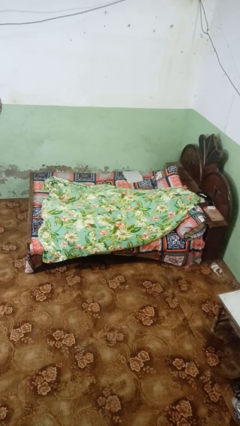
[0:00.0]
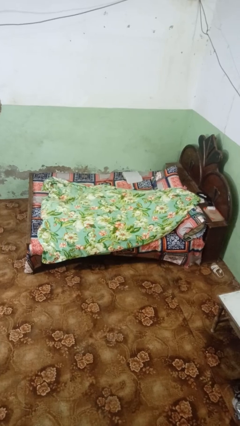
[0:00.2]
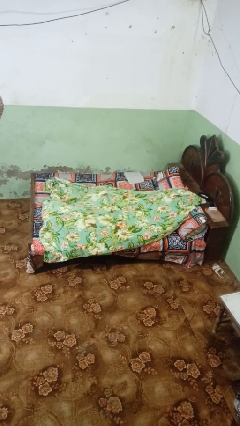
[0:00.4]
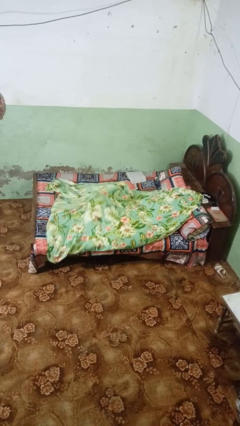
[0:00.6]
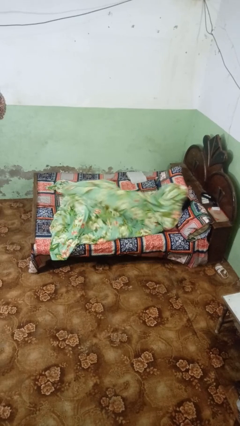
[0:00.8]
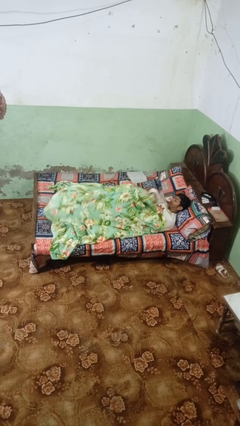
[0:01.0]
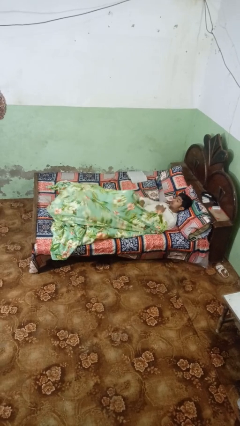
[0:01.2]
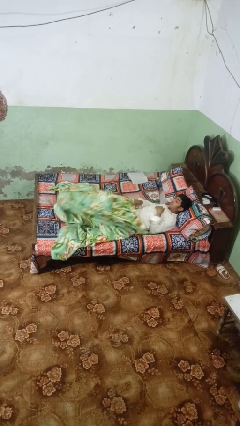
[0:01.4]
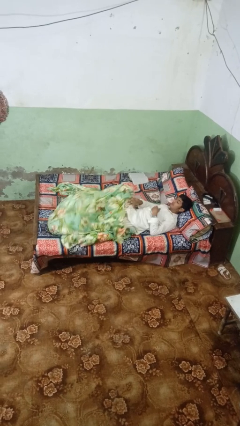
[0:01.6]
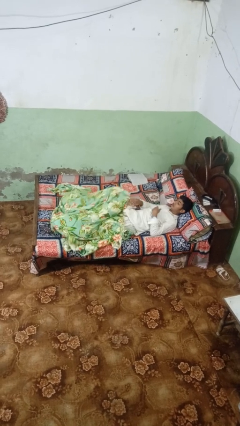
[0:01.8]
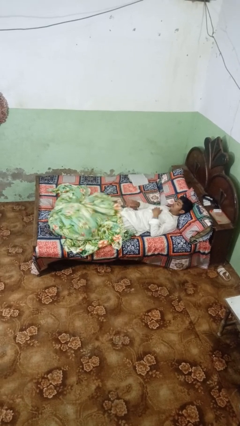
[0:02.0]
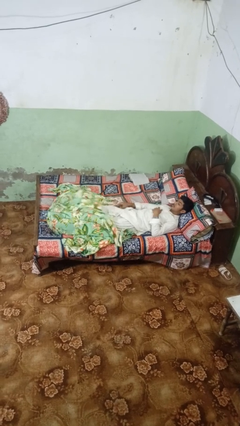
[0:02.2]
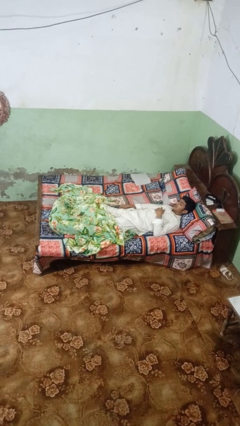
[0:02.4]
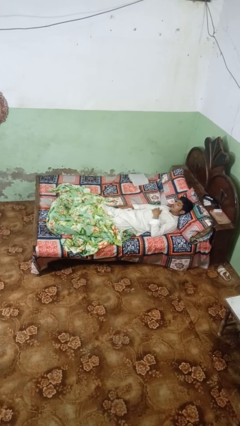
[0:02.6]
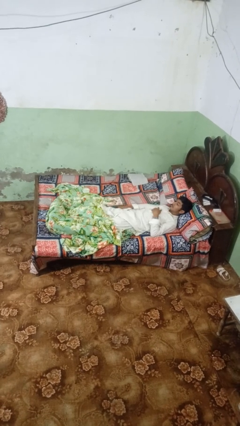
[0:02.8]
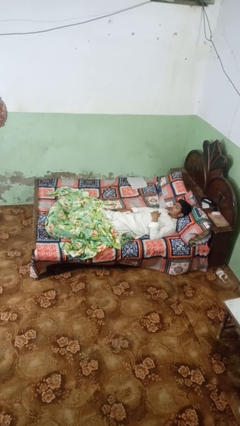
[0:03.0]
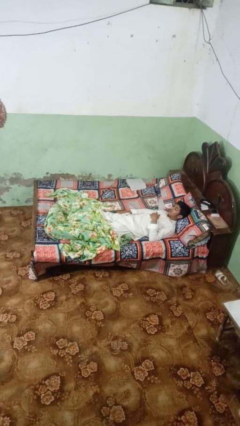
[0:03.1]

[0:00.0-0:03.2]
person uncovers with bedsheets

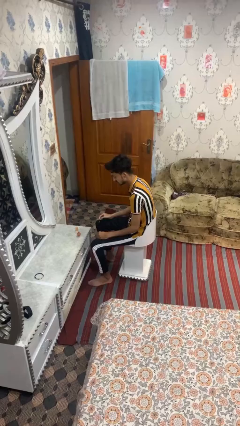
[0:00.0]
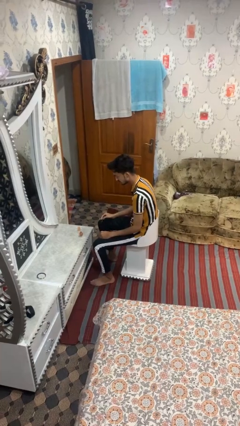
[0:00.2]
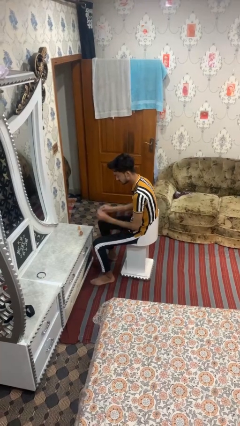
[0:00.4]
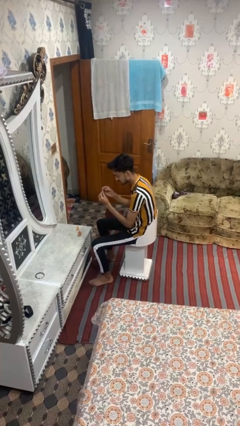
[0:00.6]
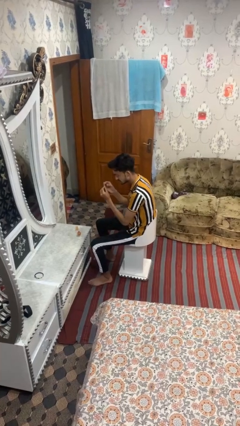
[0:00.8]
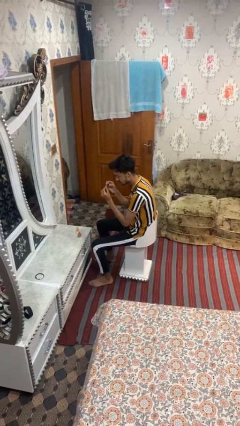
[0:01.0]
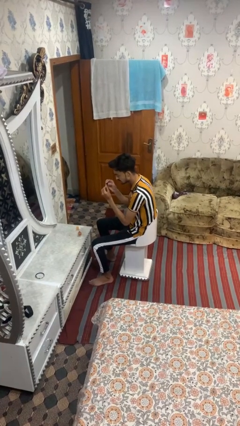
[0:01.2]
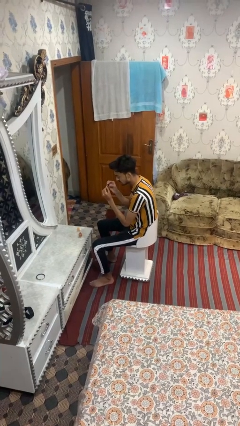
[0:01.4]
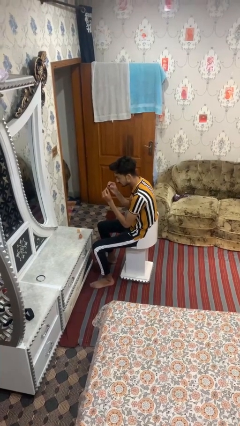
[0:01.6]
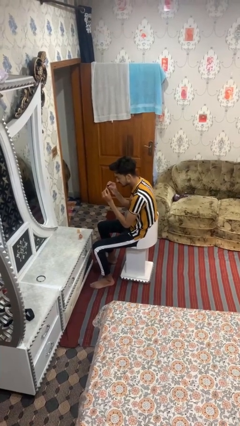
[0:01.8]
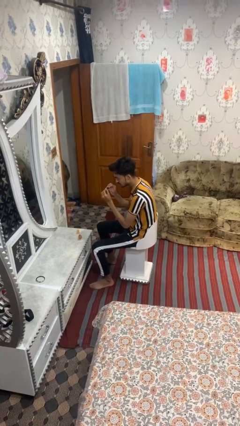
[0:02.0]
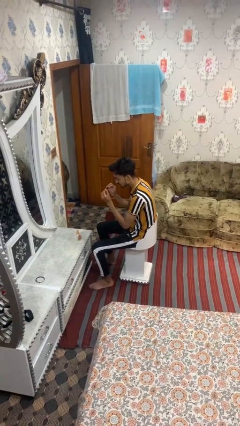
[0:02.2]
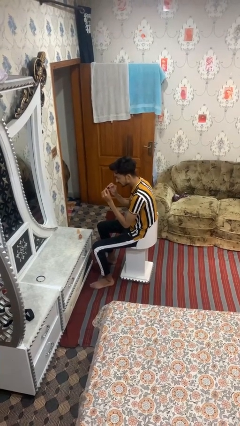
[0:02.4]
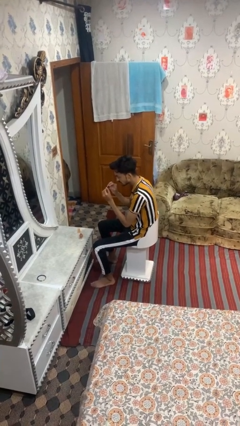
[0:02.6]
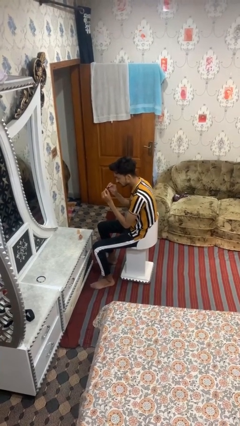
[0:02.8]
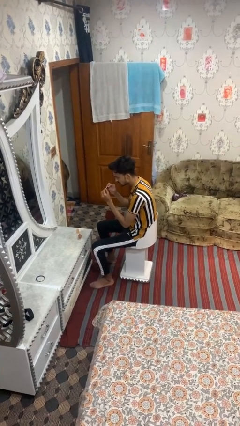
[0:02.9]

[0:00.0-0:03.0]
person paints fingernails

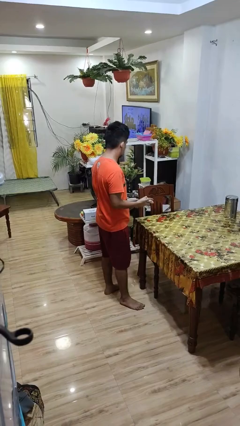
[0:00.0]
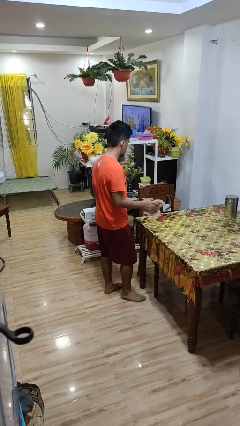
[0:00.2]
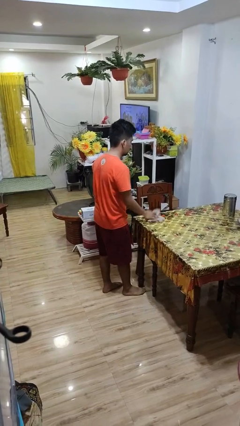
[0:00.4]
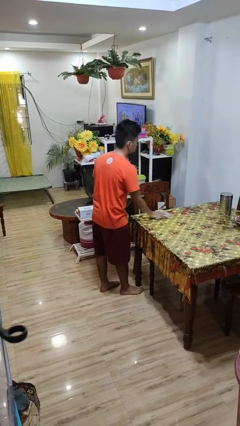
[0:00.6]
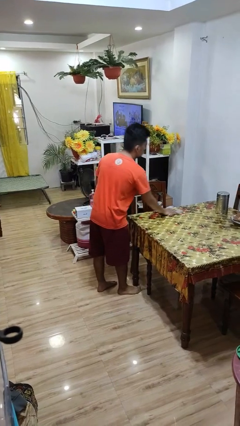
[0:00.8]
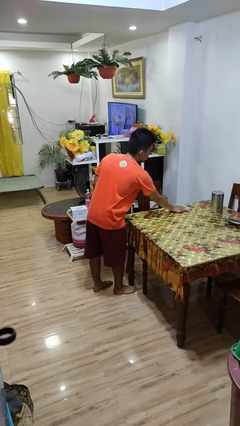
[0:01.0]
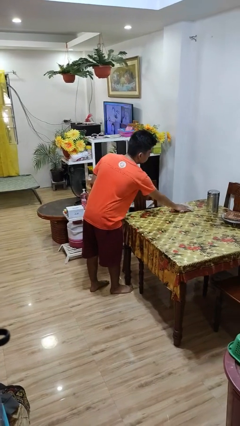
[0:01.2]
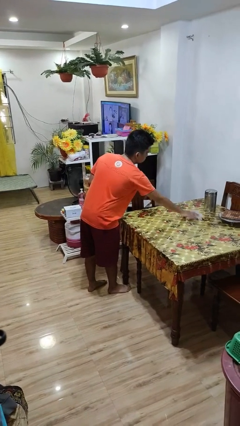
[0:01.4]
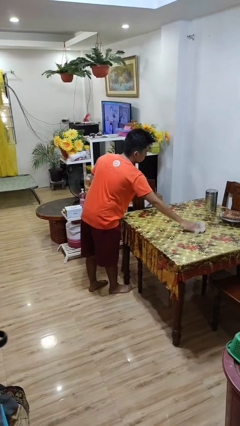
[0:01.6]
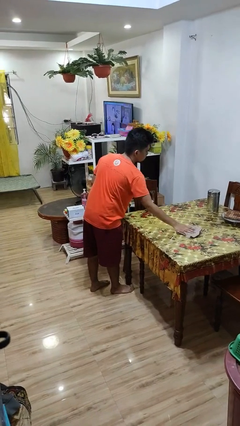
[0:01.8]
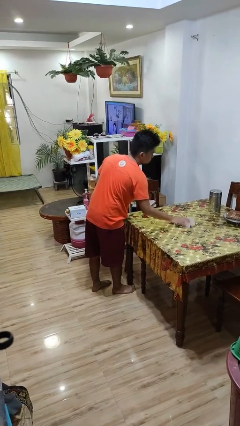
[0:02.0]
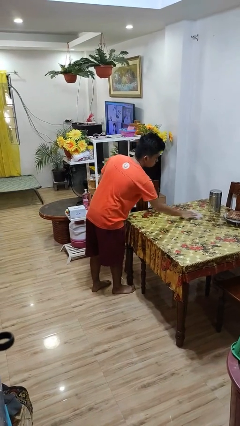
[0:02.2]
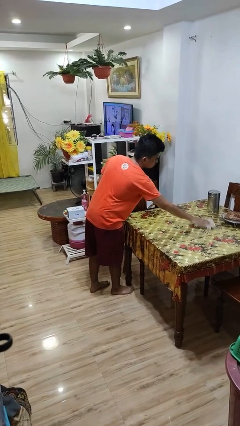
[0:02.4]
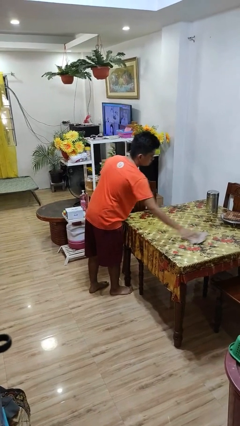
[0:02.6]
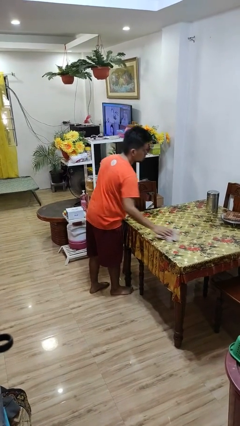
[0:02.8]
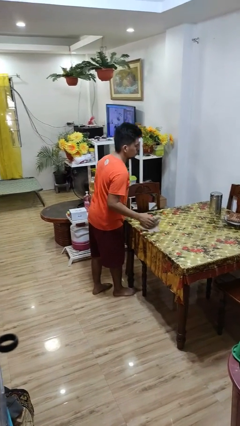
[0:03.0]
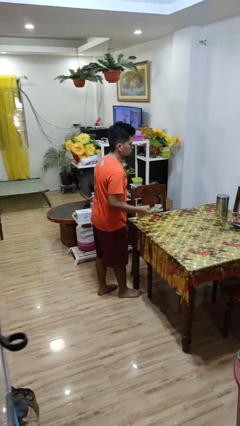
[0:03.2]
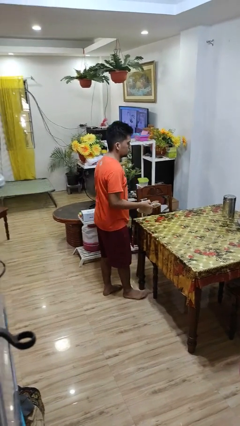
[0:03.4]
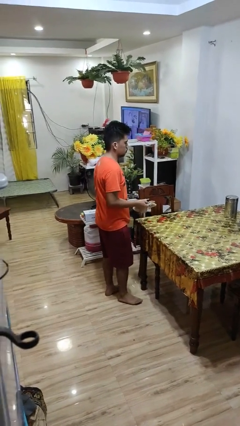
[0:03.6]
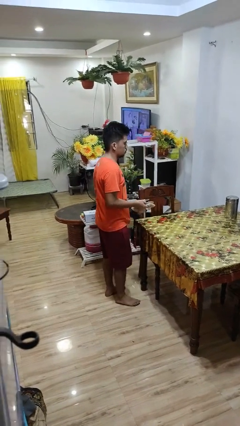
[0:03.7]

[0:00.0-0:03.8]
person cleans table with rag

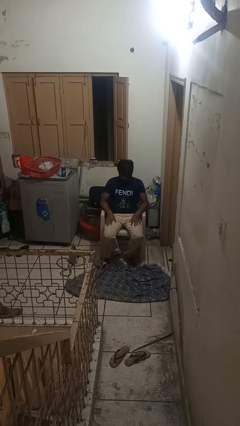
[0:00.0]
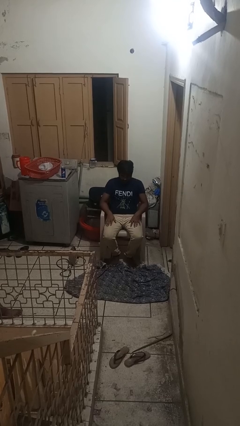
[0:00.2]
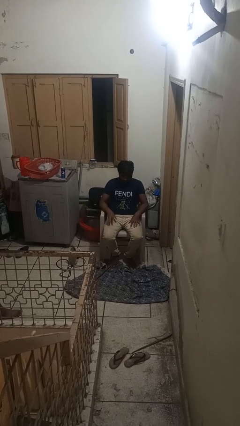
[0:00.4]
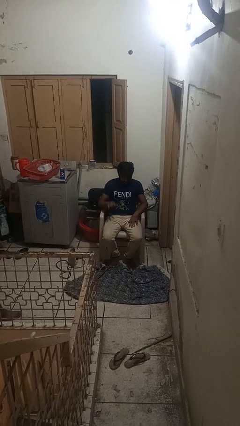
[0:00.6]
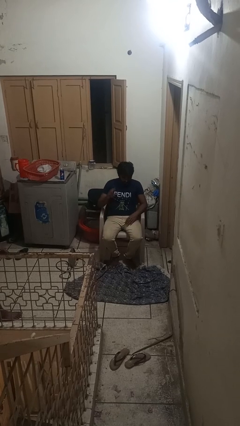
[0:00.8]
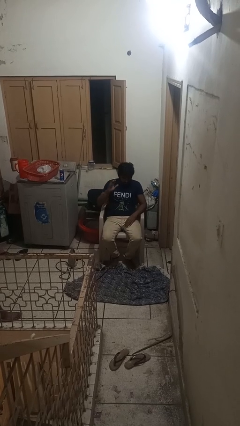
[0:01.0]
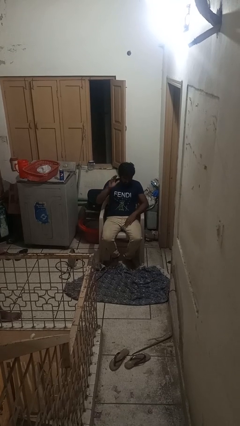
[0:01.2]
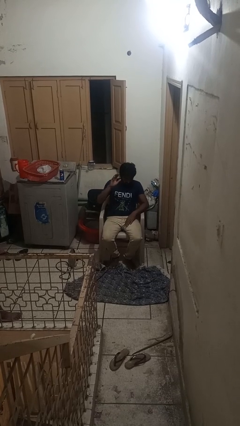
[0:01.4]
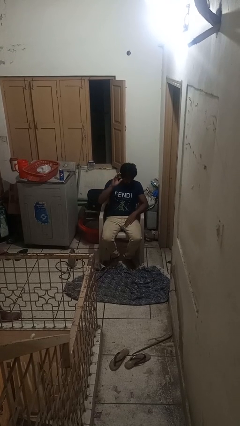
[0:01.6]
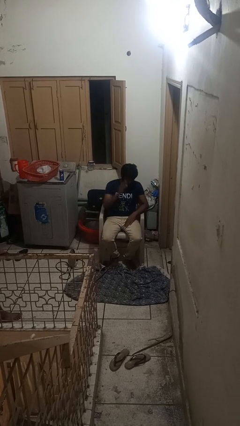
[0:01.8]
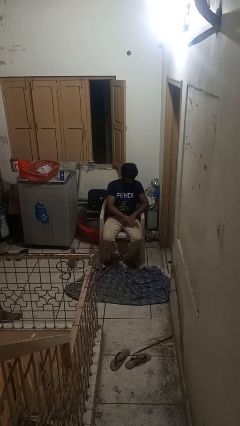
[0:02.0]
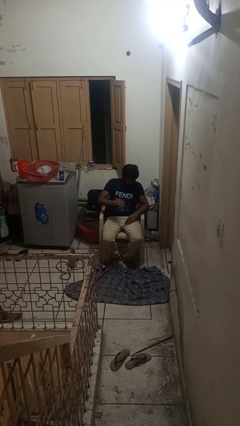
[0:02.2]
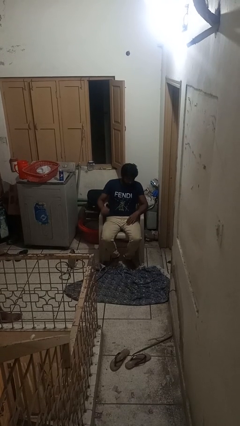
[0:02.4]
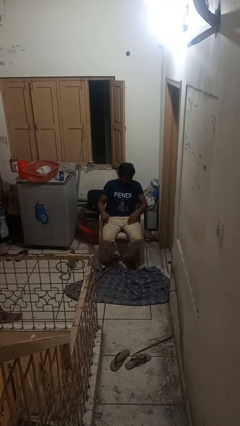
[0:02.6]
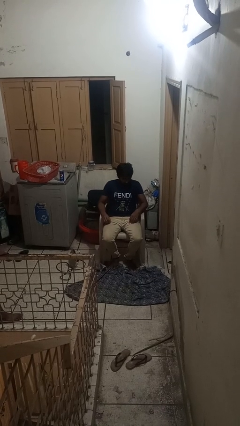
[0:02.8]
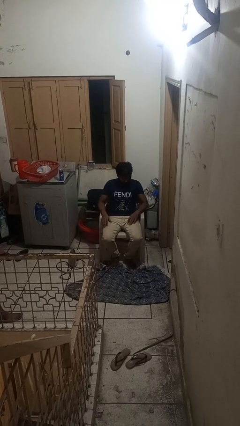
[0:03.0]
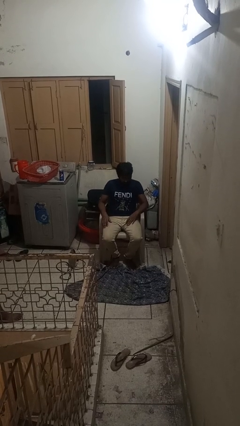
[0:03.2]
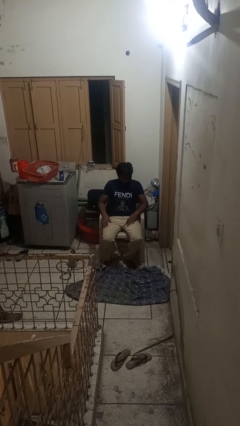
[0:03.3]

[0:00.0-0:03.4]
person swats bug

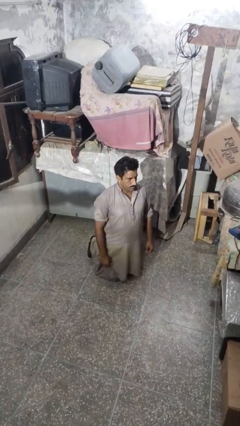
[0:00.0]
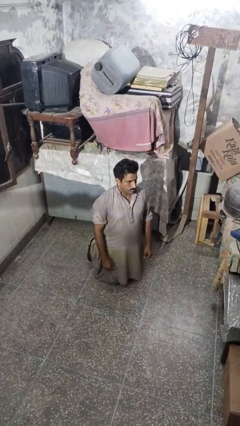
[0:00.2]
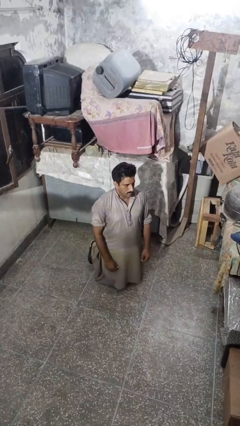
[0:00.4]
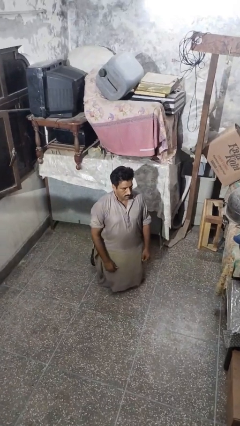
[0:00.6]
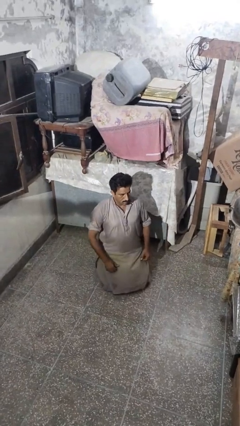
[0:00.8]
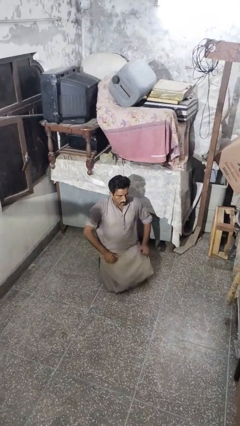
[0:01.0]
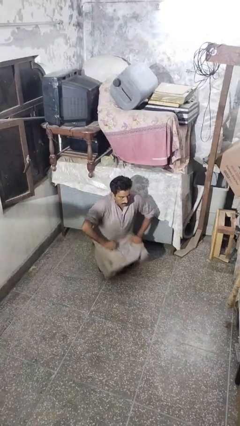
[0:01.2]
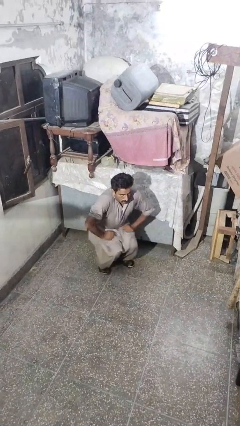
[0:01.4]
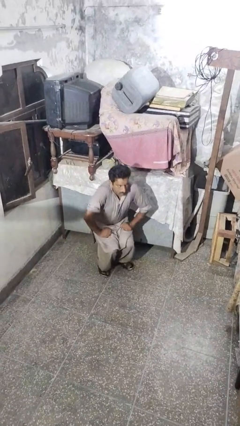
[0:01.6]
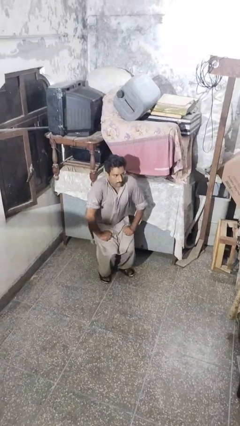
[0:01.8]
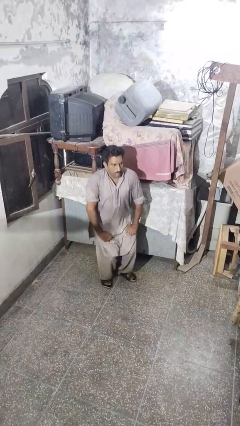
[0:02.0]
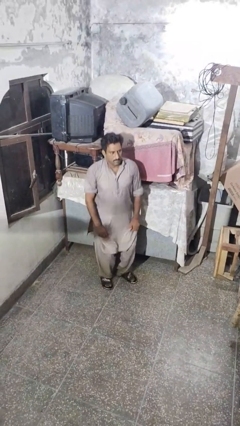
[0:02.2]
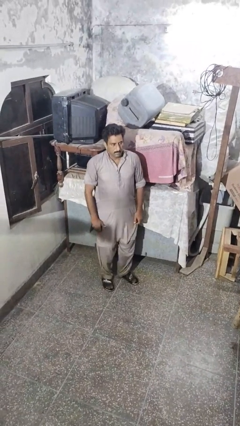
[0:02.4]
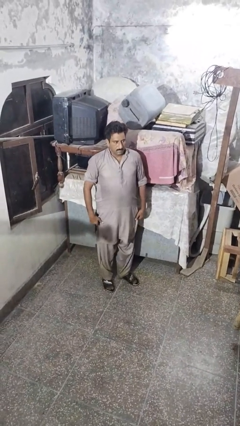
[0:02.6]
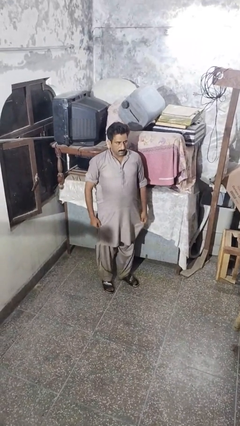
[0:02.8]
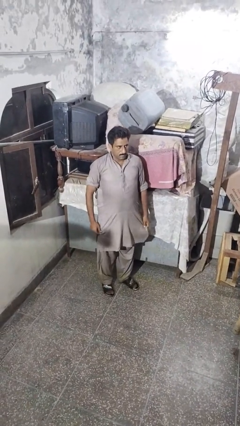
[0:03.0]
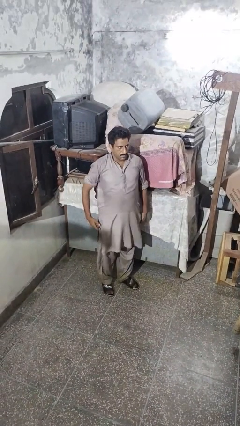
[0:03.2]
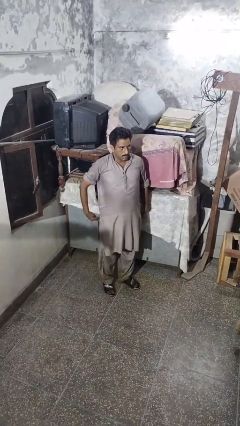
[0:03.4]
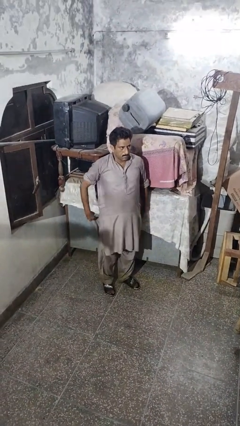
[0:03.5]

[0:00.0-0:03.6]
person stands up from floor

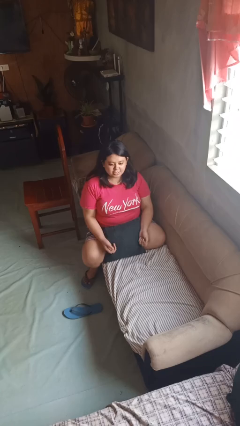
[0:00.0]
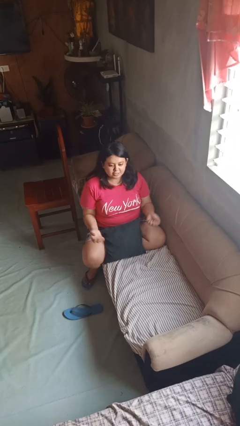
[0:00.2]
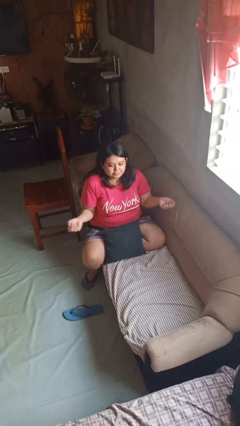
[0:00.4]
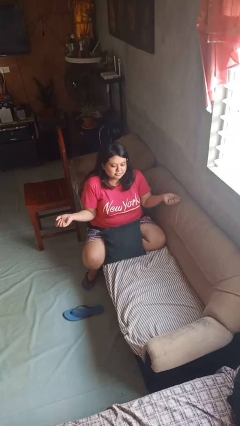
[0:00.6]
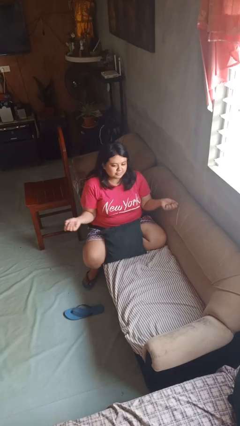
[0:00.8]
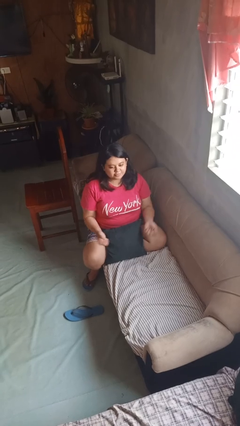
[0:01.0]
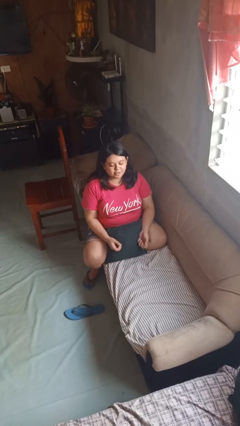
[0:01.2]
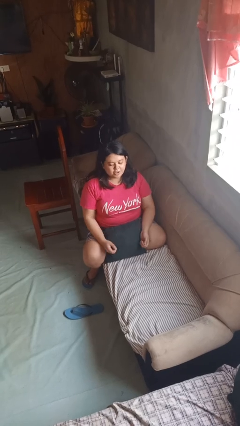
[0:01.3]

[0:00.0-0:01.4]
person shrugs
